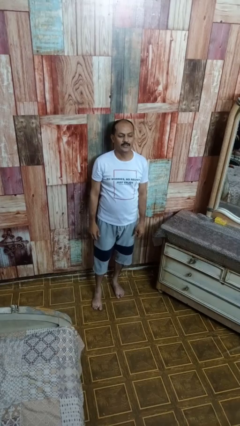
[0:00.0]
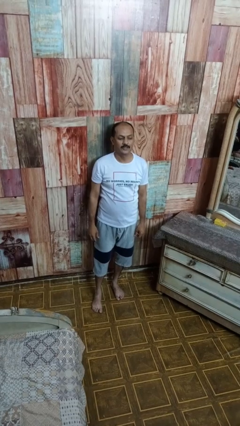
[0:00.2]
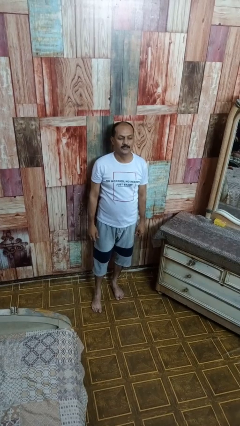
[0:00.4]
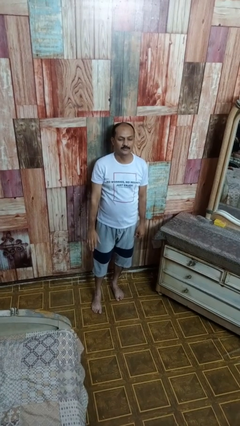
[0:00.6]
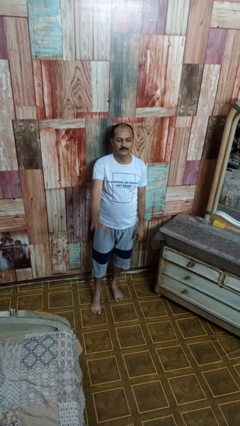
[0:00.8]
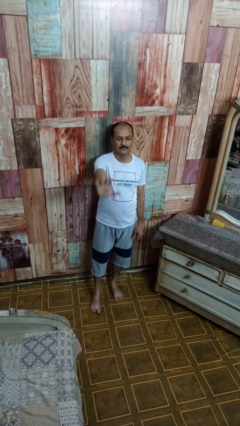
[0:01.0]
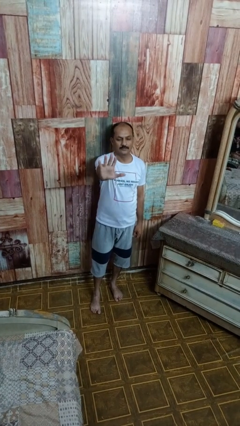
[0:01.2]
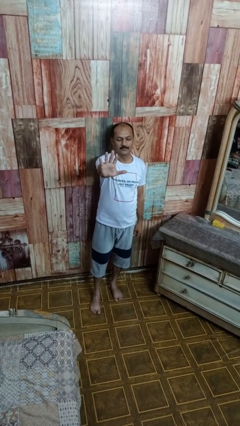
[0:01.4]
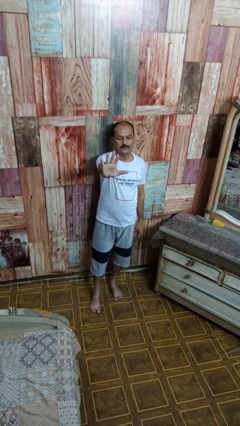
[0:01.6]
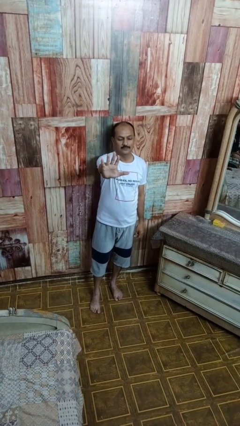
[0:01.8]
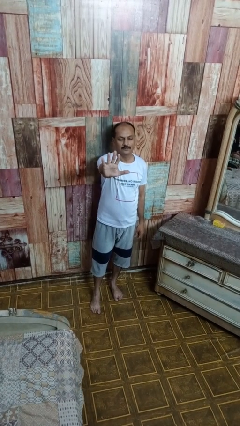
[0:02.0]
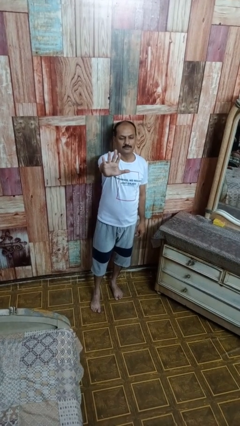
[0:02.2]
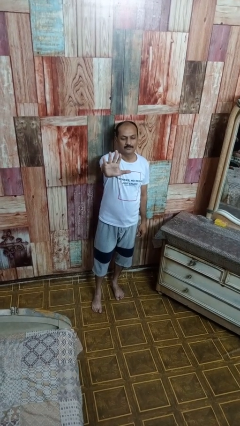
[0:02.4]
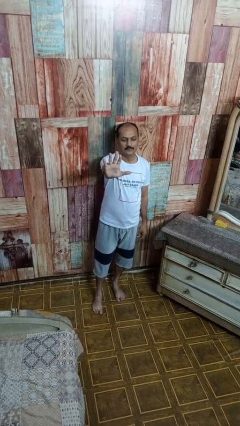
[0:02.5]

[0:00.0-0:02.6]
person gestures number five

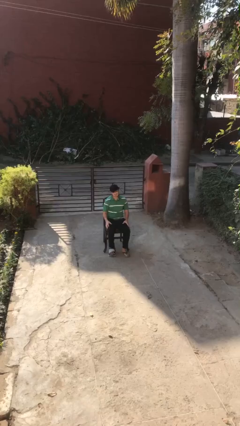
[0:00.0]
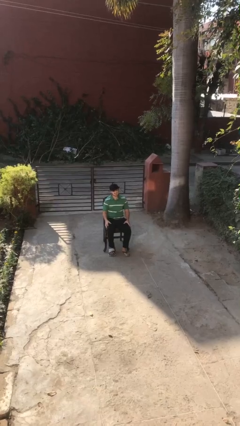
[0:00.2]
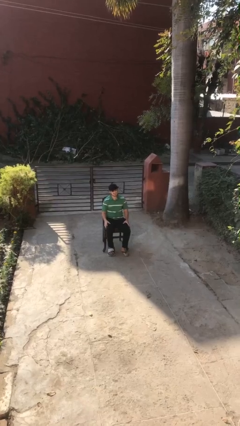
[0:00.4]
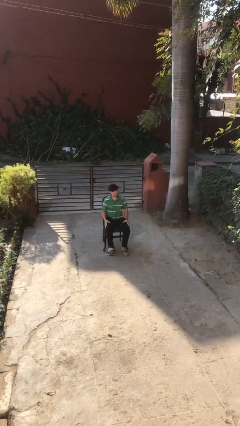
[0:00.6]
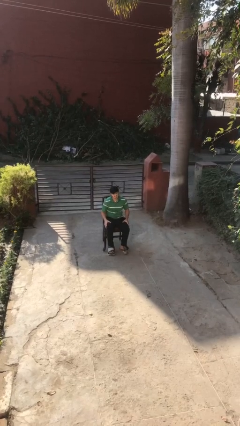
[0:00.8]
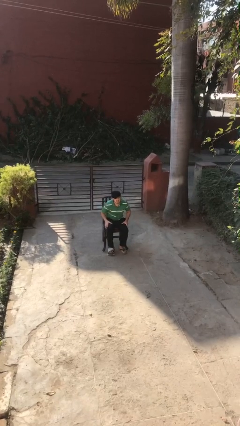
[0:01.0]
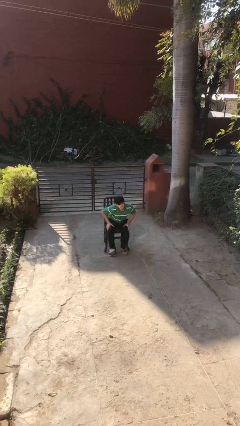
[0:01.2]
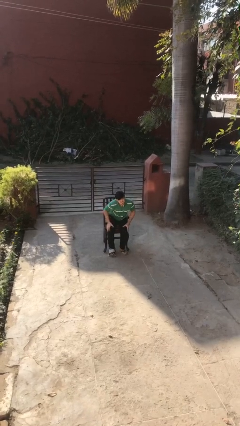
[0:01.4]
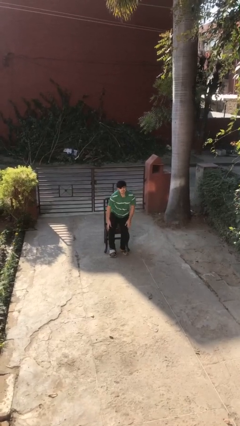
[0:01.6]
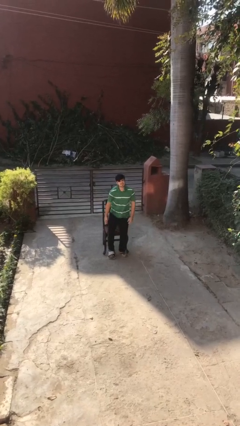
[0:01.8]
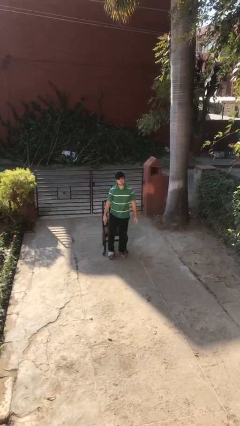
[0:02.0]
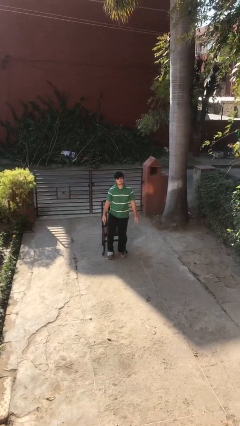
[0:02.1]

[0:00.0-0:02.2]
person stands up

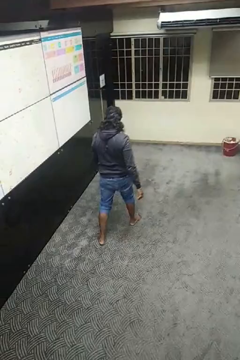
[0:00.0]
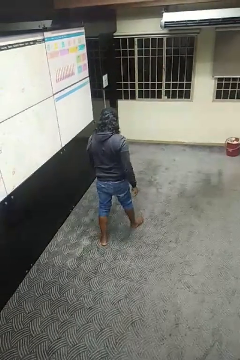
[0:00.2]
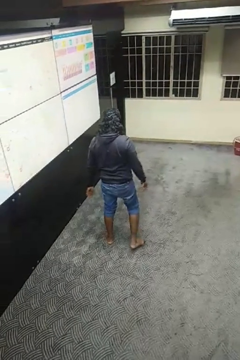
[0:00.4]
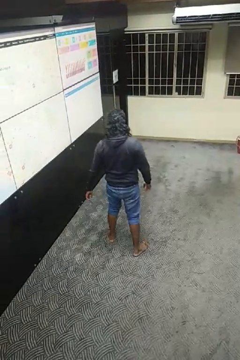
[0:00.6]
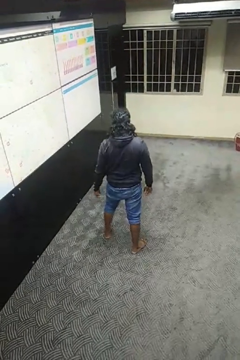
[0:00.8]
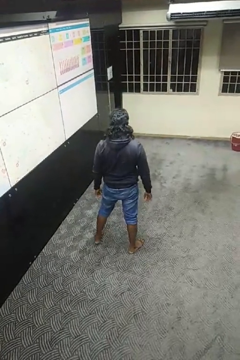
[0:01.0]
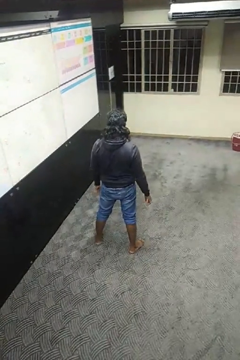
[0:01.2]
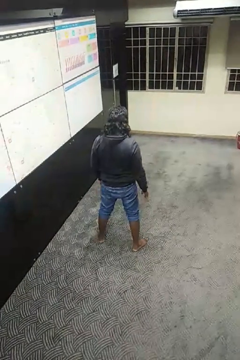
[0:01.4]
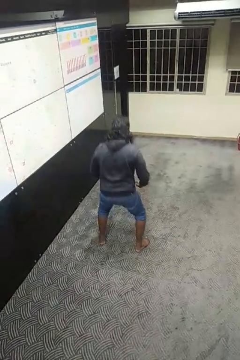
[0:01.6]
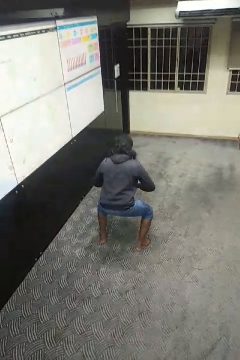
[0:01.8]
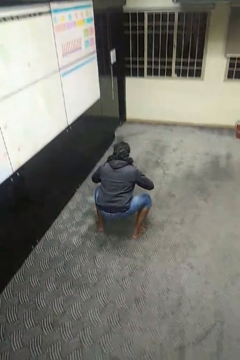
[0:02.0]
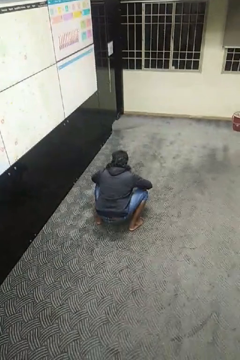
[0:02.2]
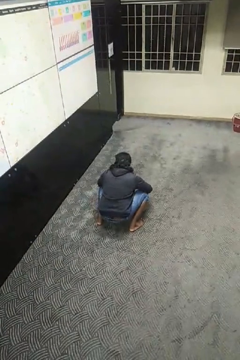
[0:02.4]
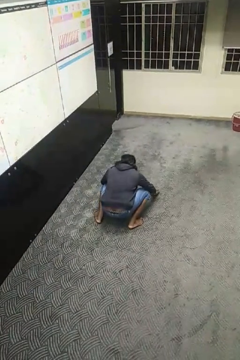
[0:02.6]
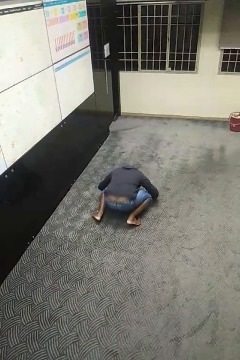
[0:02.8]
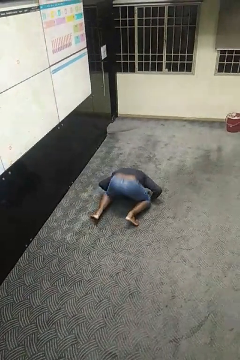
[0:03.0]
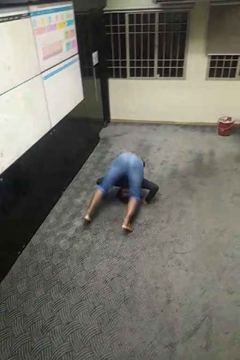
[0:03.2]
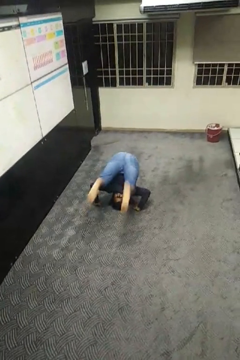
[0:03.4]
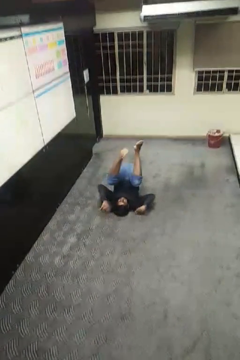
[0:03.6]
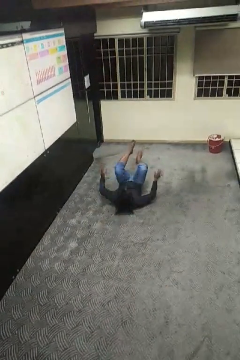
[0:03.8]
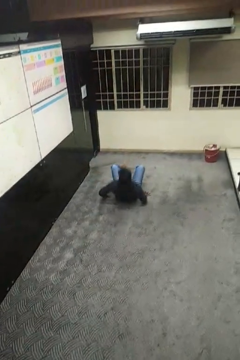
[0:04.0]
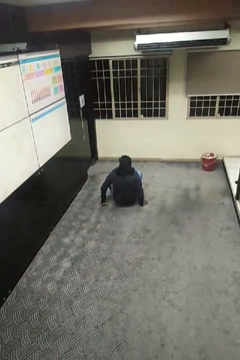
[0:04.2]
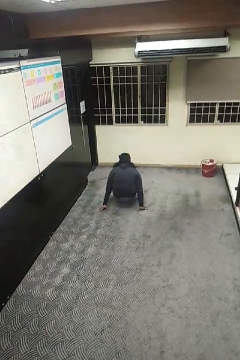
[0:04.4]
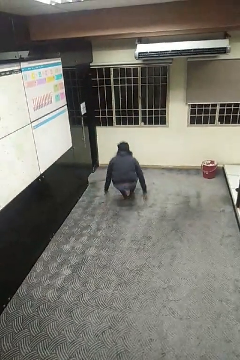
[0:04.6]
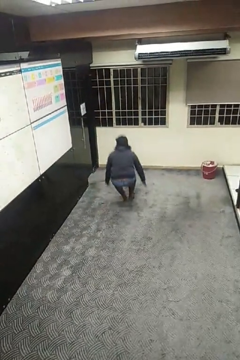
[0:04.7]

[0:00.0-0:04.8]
person somersaults

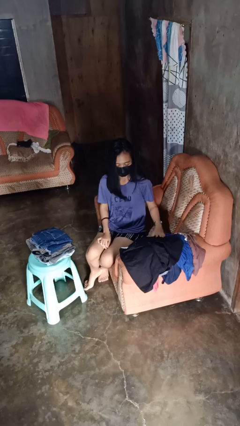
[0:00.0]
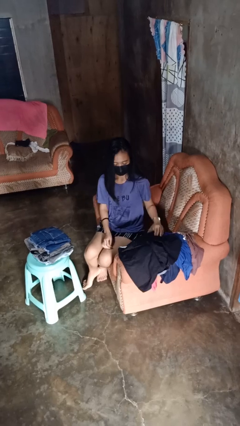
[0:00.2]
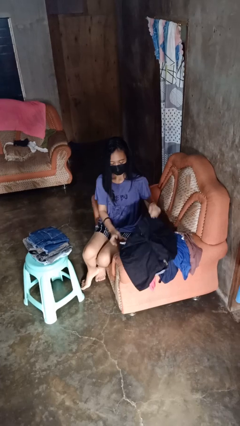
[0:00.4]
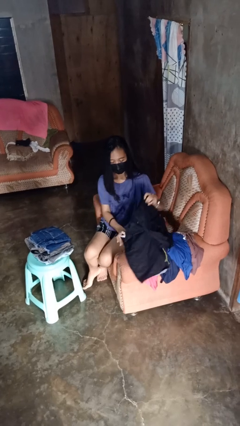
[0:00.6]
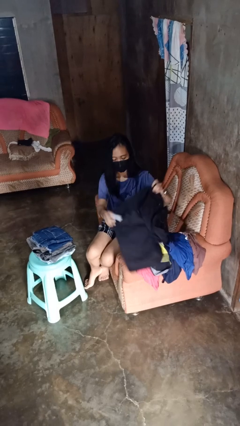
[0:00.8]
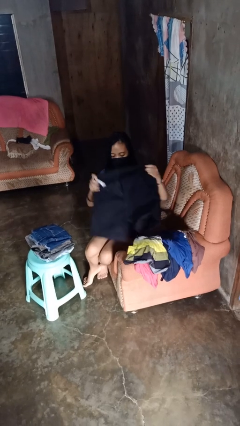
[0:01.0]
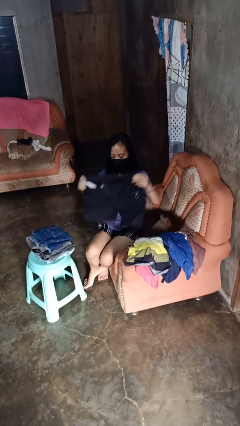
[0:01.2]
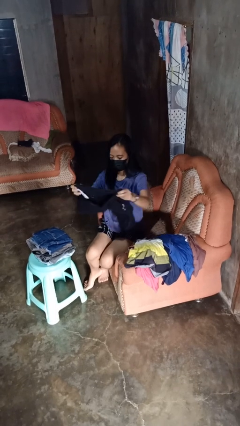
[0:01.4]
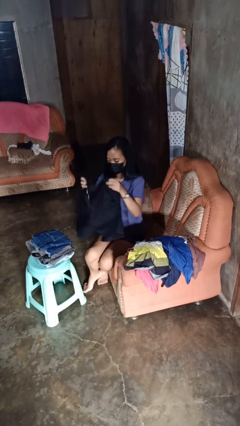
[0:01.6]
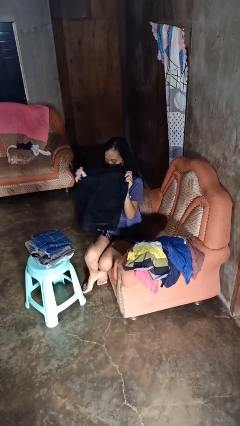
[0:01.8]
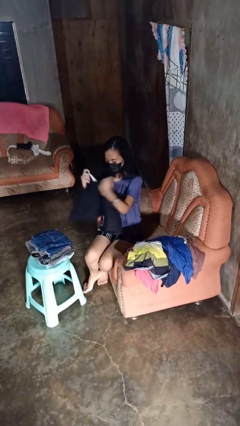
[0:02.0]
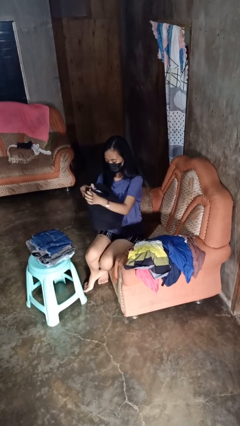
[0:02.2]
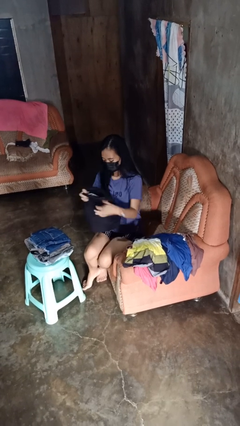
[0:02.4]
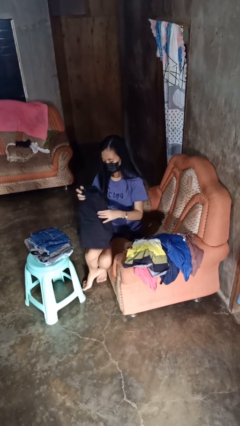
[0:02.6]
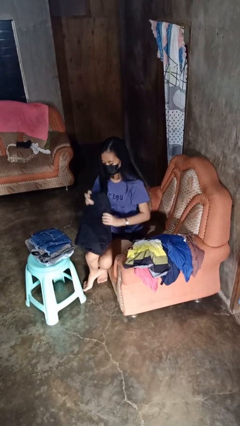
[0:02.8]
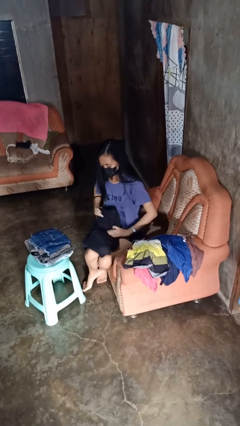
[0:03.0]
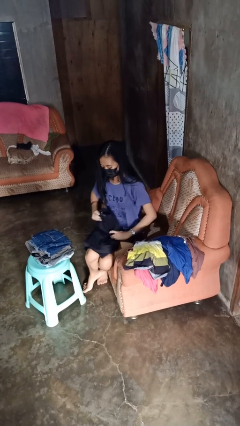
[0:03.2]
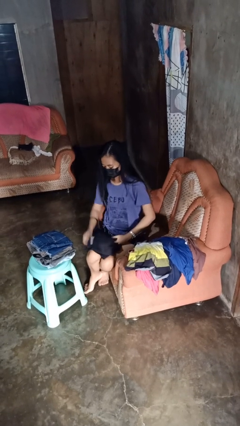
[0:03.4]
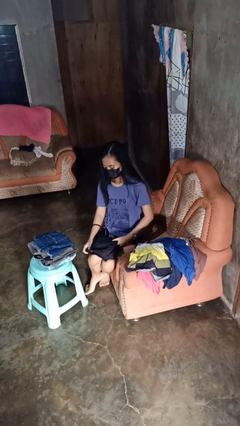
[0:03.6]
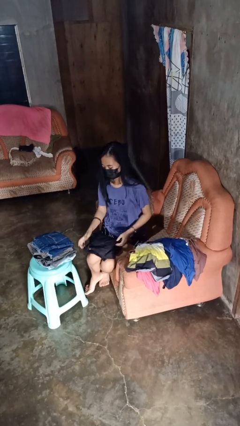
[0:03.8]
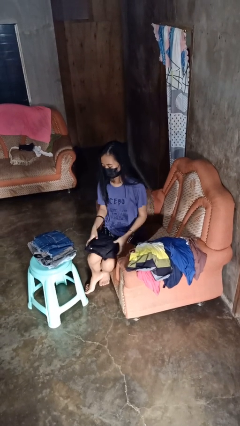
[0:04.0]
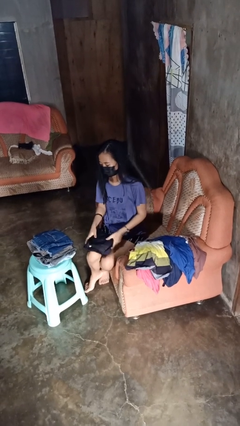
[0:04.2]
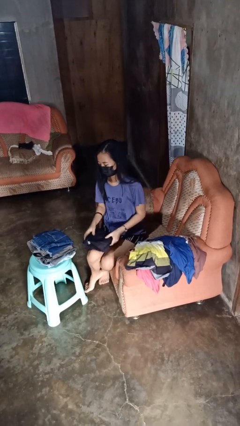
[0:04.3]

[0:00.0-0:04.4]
person folds pants

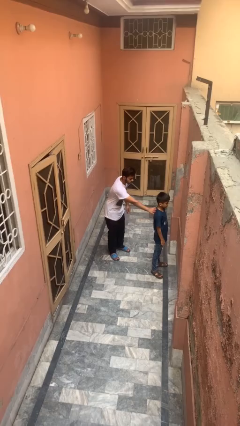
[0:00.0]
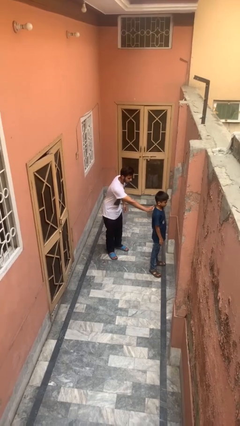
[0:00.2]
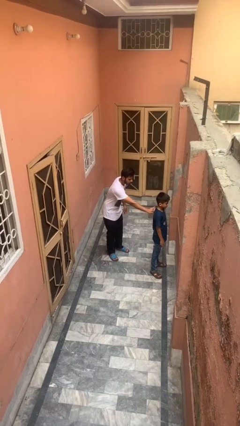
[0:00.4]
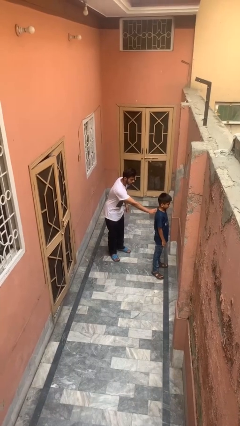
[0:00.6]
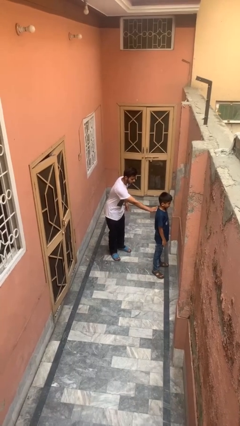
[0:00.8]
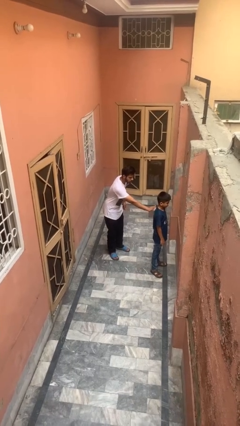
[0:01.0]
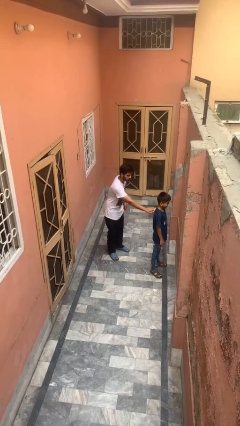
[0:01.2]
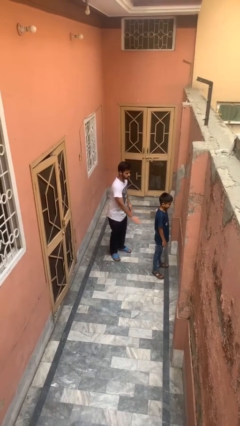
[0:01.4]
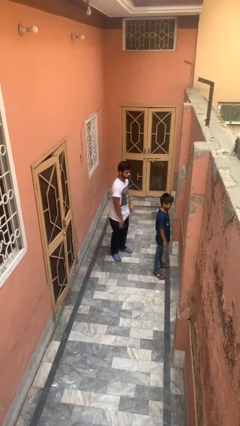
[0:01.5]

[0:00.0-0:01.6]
person touches back of person

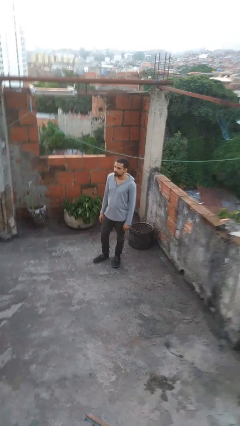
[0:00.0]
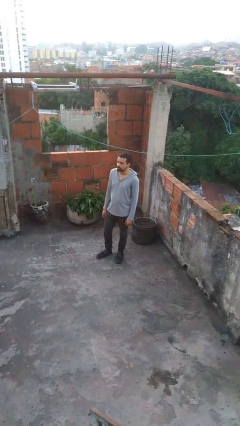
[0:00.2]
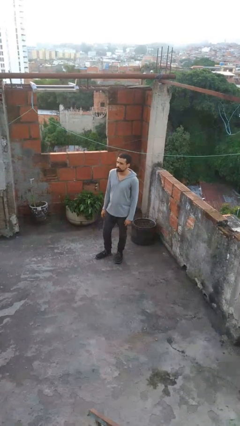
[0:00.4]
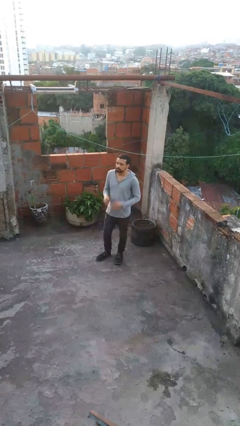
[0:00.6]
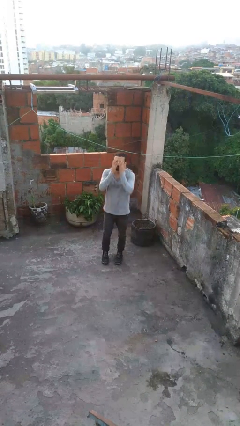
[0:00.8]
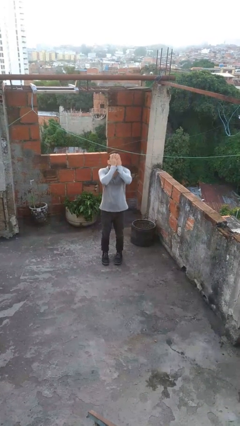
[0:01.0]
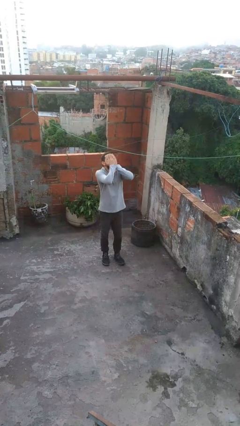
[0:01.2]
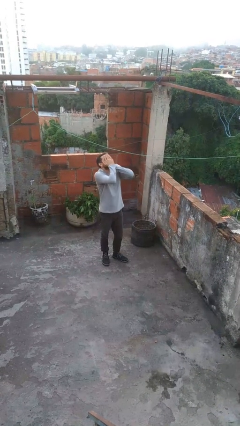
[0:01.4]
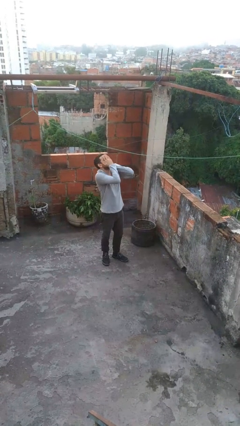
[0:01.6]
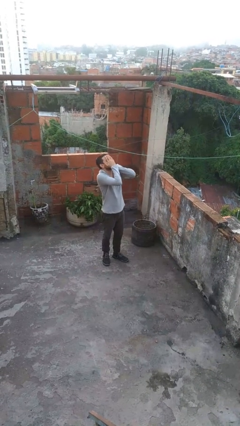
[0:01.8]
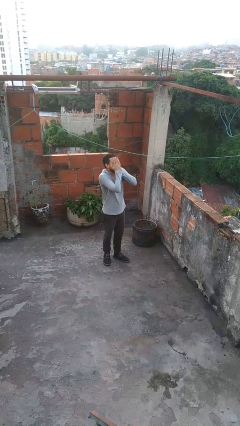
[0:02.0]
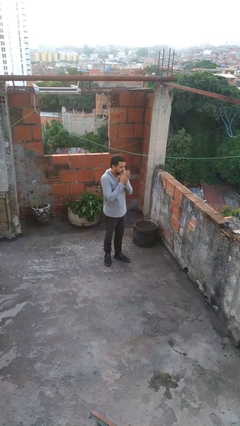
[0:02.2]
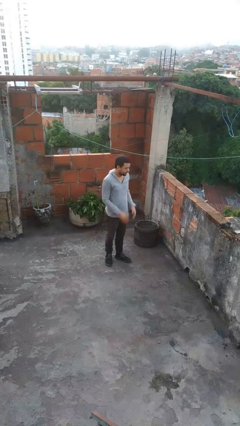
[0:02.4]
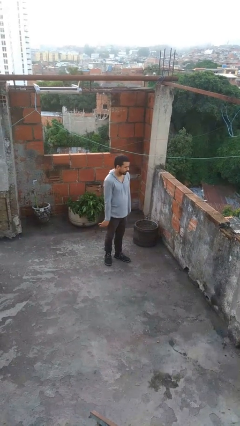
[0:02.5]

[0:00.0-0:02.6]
person covers face with hands
